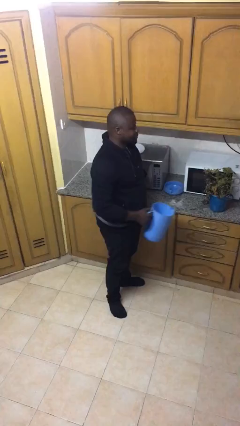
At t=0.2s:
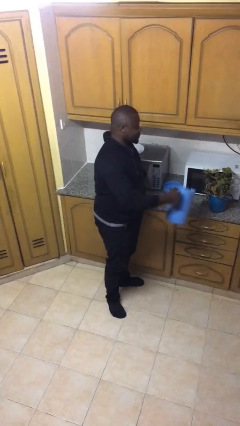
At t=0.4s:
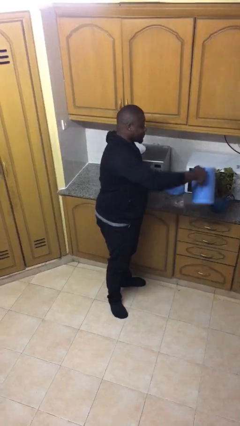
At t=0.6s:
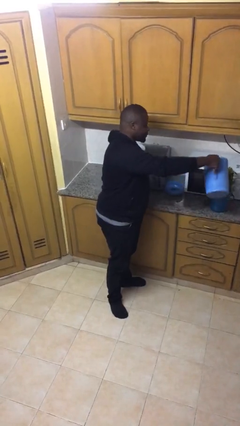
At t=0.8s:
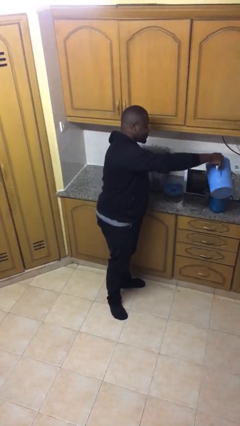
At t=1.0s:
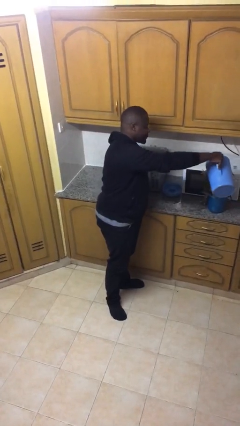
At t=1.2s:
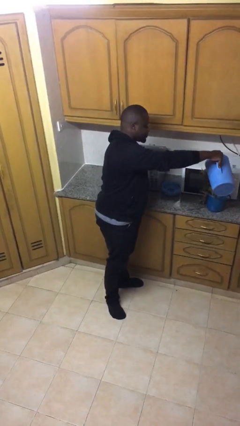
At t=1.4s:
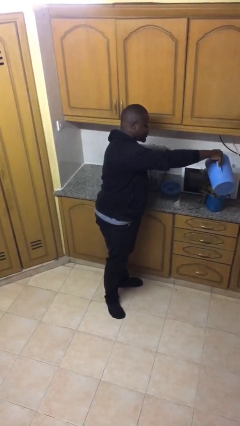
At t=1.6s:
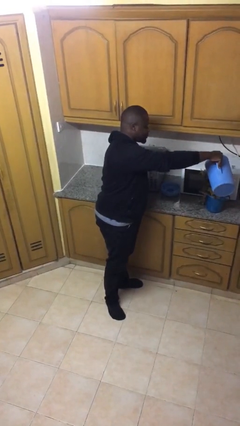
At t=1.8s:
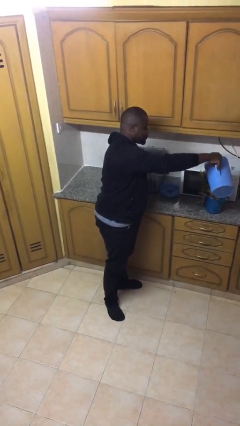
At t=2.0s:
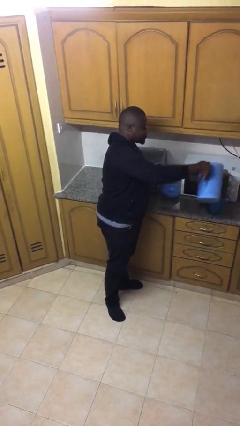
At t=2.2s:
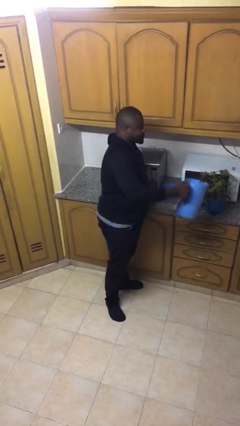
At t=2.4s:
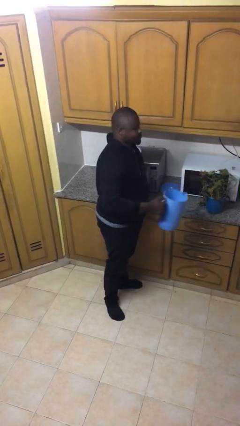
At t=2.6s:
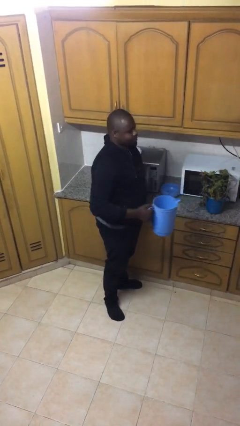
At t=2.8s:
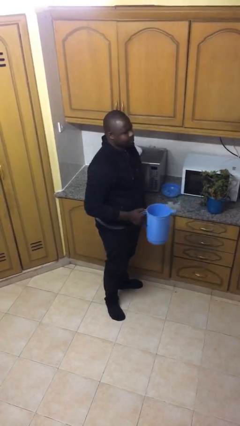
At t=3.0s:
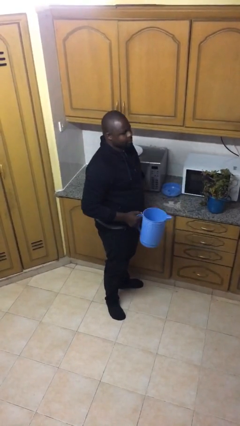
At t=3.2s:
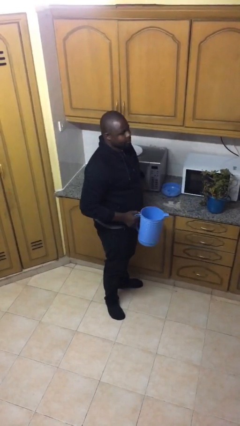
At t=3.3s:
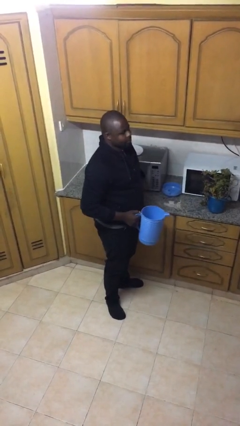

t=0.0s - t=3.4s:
person waters houseplant

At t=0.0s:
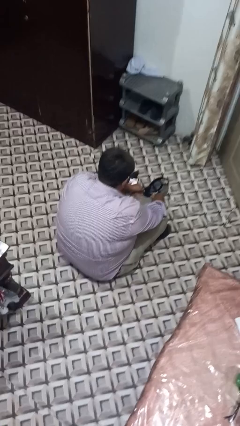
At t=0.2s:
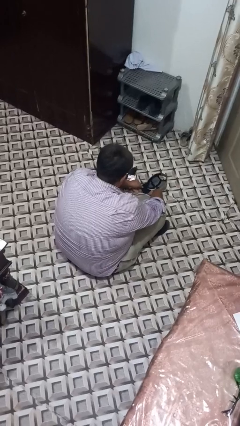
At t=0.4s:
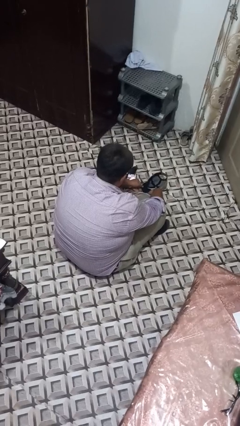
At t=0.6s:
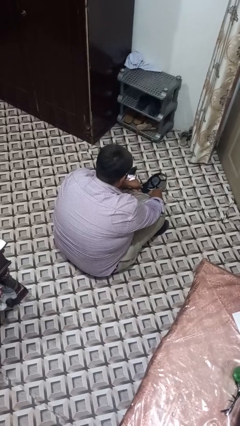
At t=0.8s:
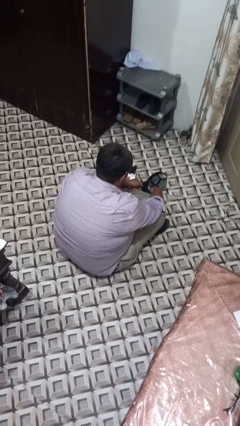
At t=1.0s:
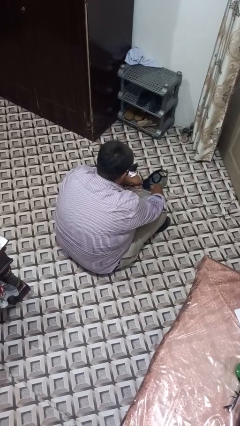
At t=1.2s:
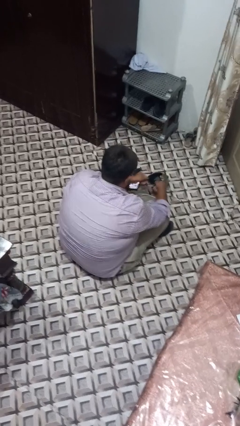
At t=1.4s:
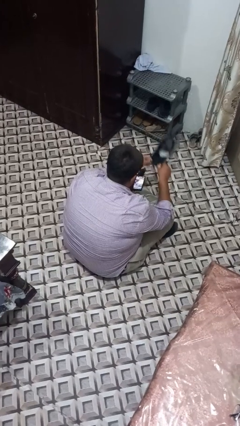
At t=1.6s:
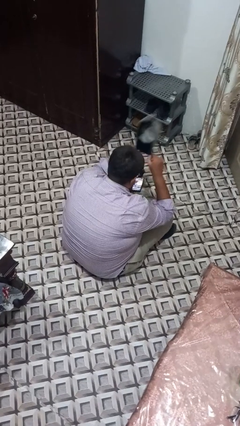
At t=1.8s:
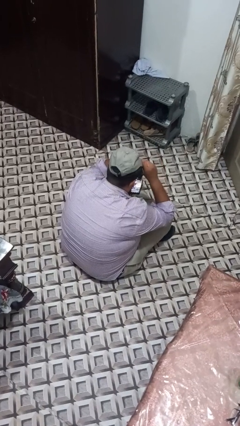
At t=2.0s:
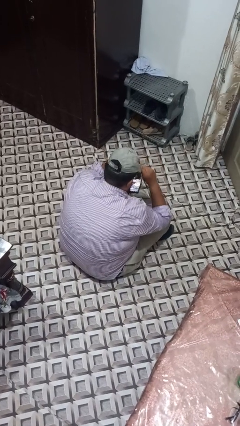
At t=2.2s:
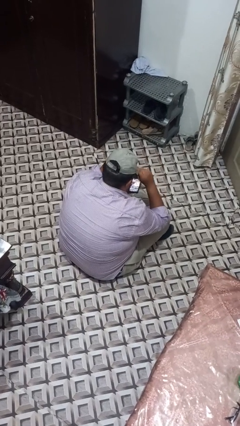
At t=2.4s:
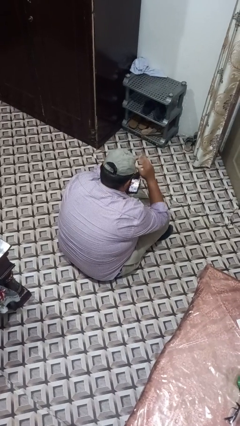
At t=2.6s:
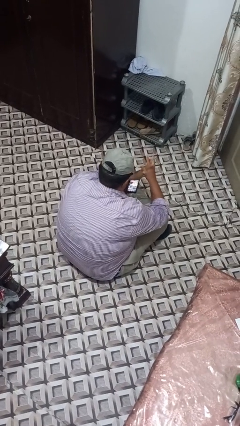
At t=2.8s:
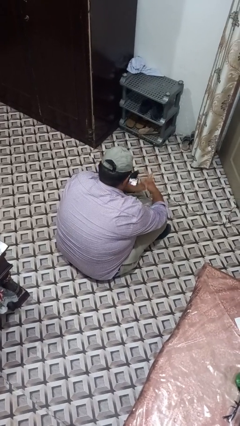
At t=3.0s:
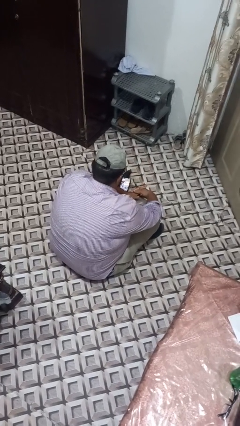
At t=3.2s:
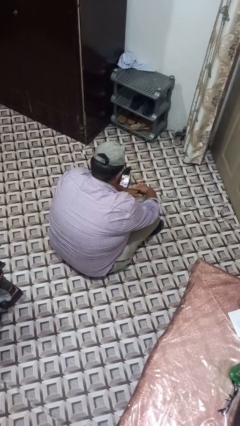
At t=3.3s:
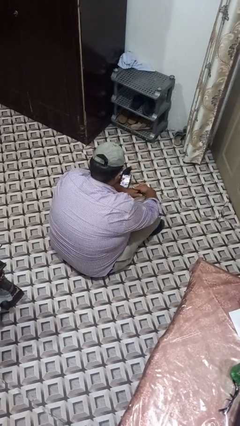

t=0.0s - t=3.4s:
person puts on hat

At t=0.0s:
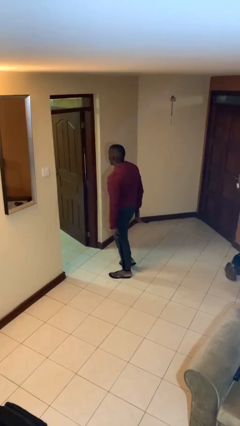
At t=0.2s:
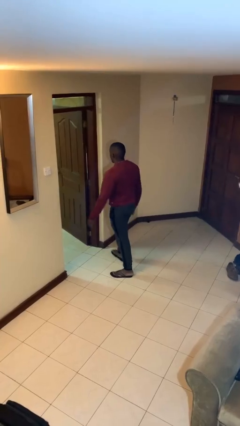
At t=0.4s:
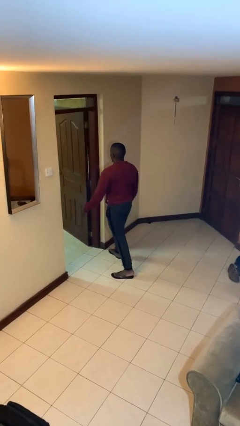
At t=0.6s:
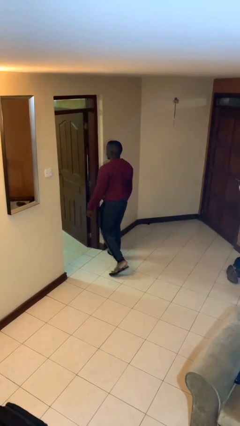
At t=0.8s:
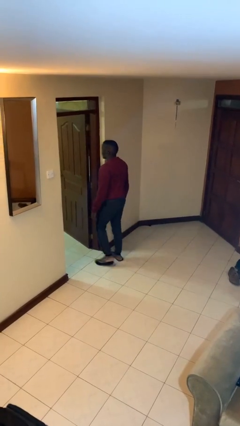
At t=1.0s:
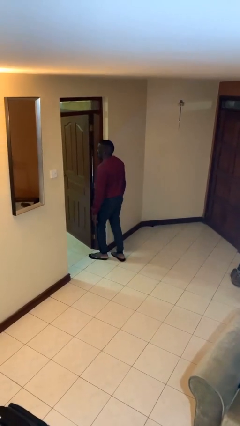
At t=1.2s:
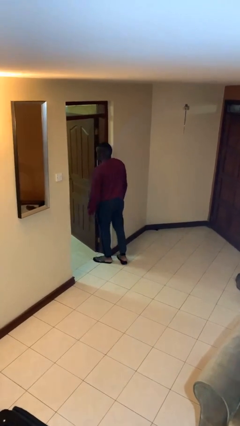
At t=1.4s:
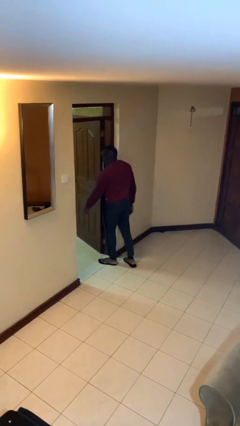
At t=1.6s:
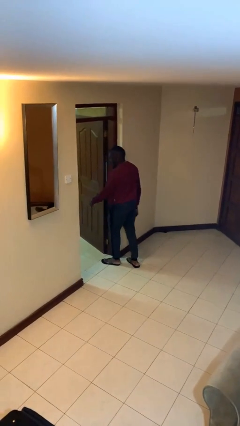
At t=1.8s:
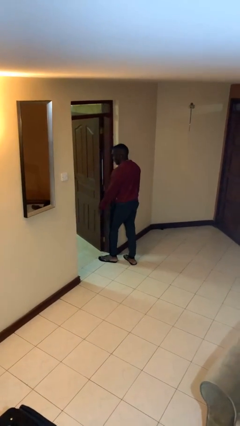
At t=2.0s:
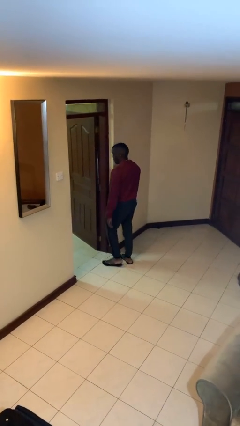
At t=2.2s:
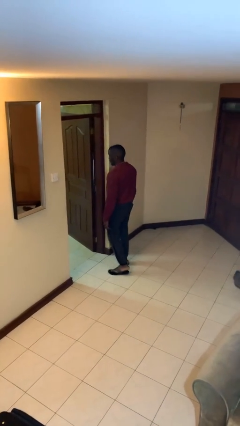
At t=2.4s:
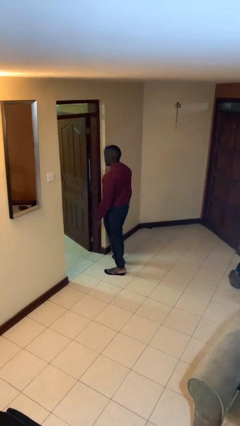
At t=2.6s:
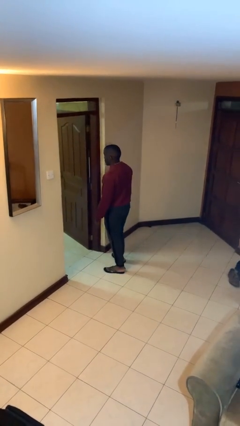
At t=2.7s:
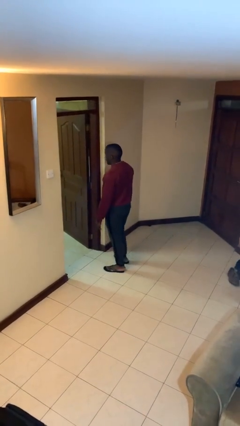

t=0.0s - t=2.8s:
person bumps into wall

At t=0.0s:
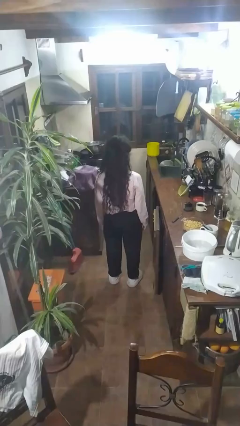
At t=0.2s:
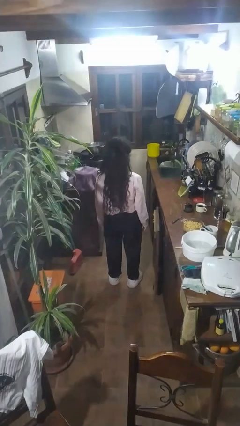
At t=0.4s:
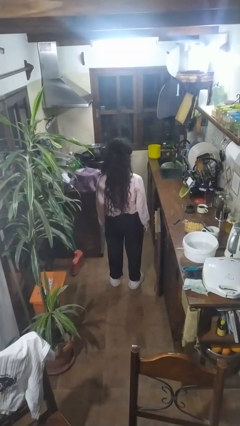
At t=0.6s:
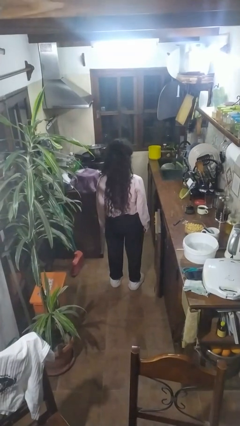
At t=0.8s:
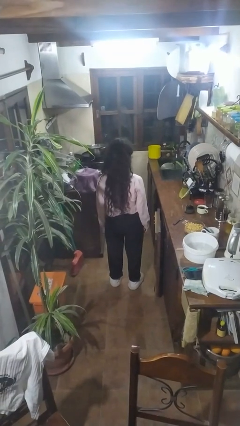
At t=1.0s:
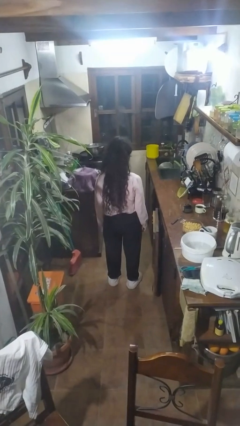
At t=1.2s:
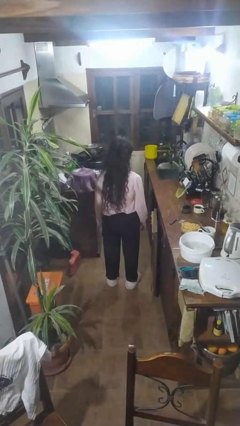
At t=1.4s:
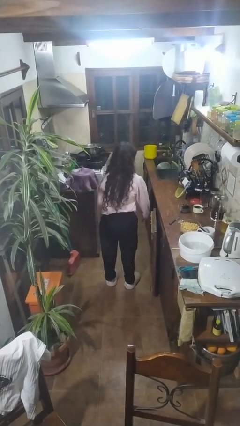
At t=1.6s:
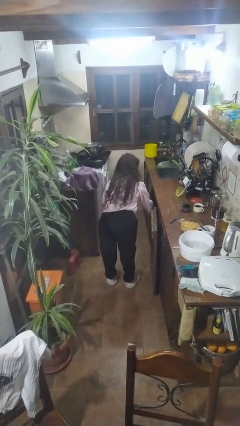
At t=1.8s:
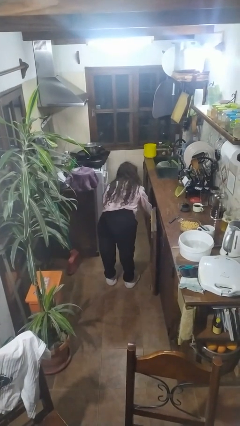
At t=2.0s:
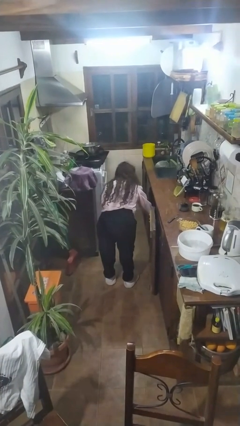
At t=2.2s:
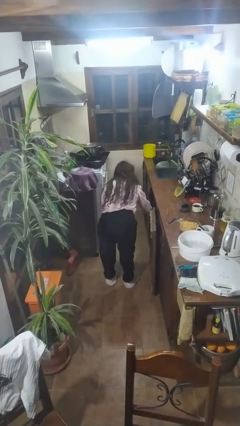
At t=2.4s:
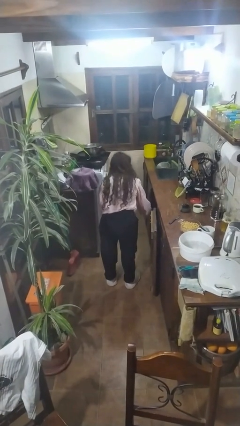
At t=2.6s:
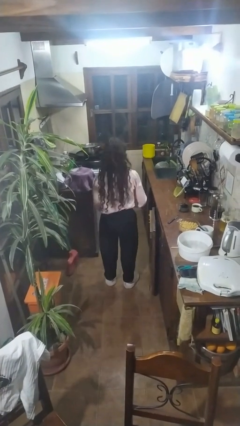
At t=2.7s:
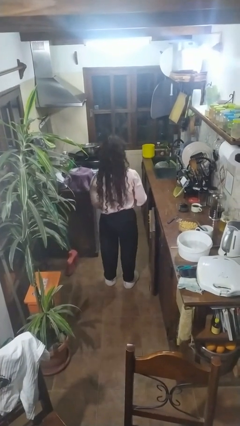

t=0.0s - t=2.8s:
person takes object from cabinet

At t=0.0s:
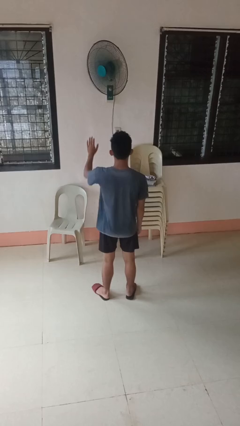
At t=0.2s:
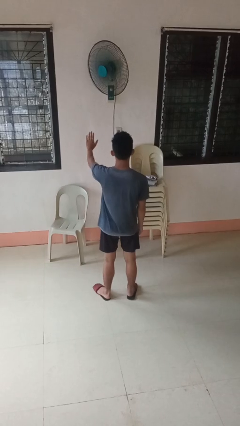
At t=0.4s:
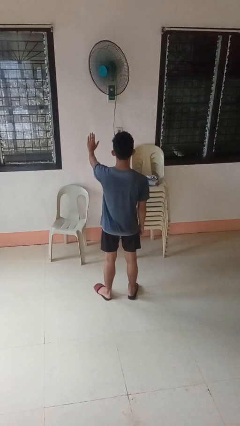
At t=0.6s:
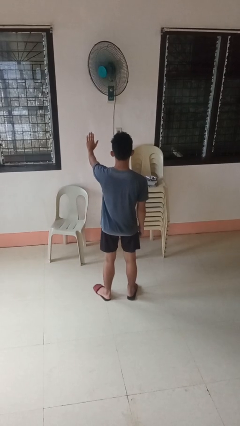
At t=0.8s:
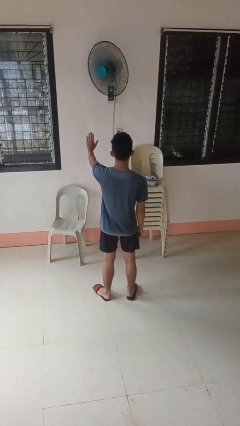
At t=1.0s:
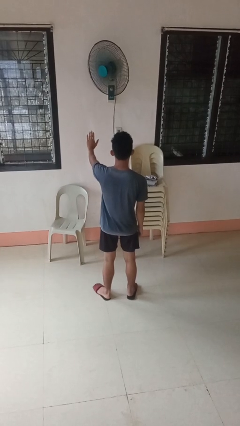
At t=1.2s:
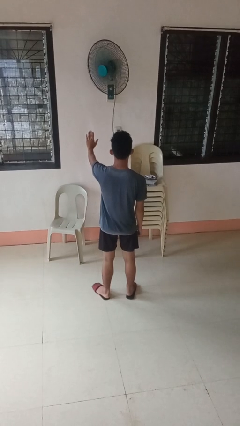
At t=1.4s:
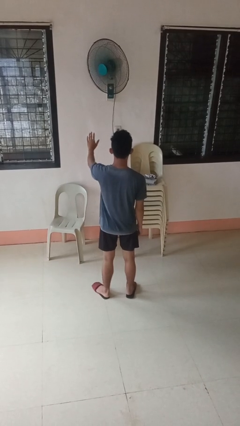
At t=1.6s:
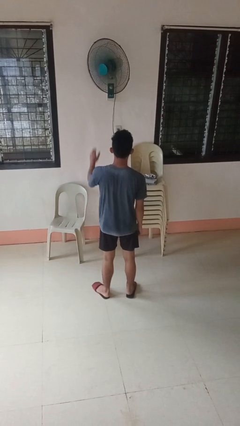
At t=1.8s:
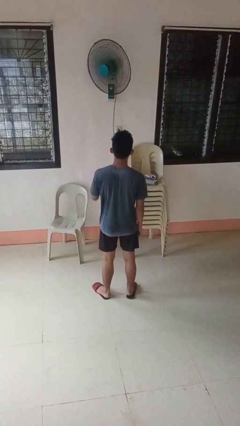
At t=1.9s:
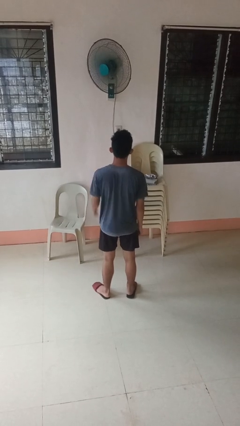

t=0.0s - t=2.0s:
person gestures stop

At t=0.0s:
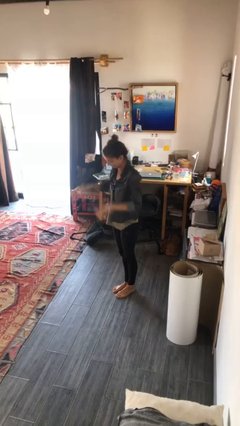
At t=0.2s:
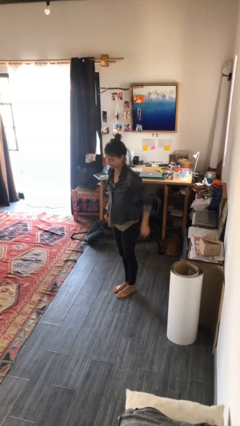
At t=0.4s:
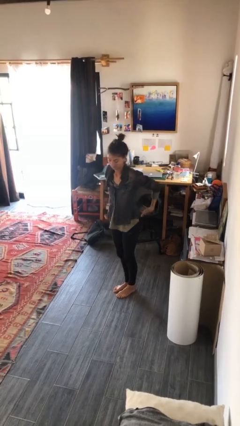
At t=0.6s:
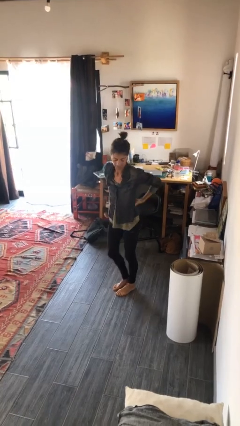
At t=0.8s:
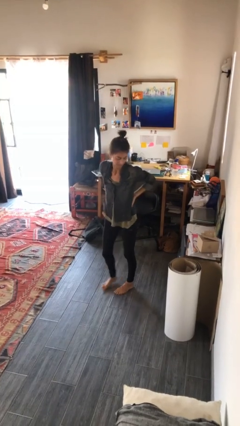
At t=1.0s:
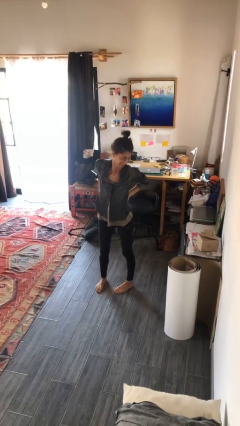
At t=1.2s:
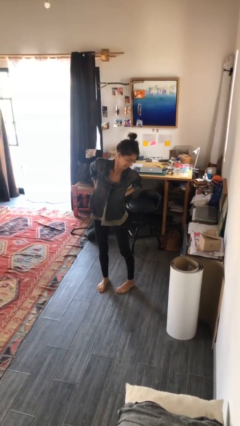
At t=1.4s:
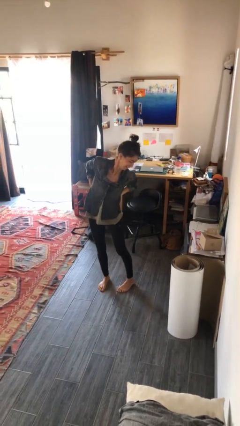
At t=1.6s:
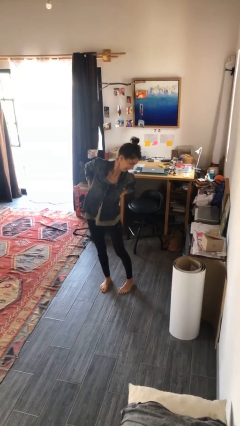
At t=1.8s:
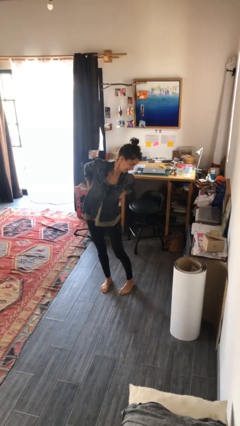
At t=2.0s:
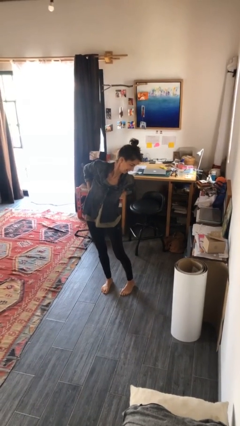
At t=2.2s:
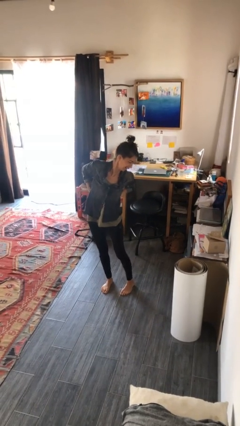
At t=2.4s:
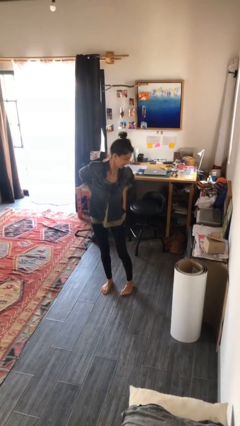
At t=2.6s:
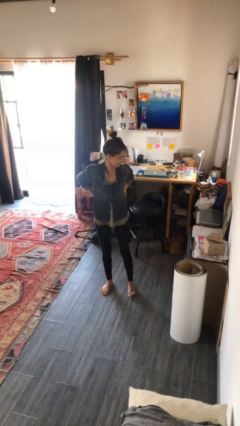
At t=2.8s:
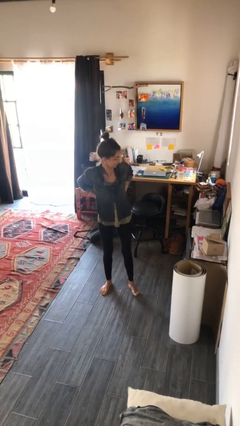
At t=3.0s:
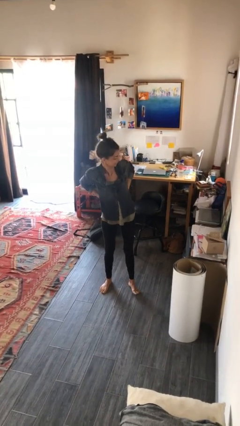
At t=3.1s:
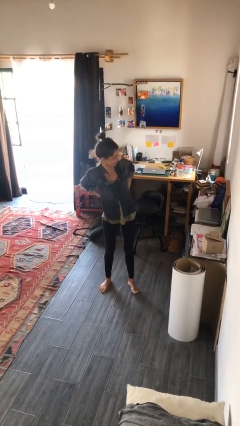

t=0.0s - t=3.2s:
person stretches back
